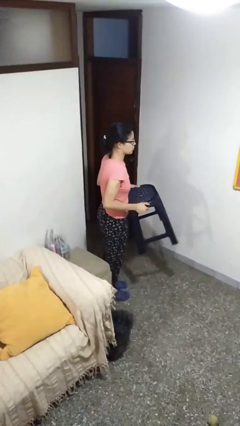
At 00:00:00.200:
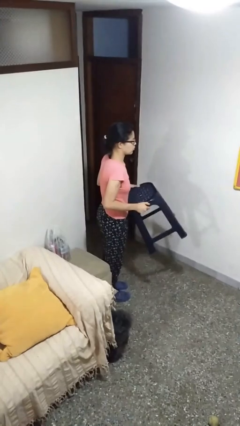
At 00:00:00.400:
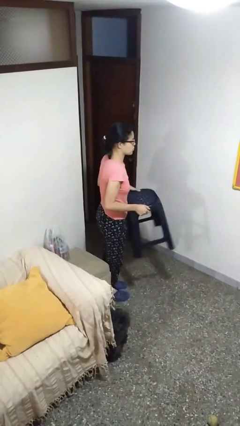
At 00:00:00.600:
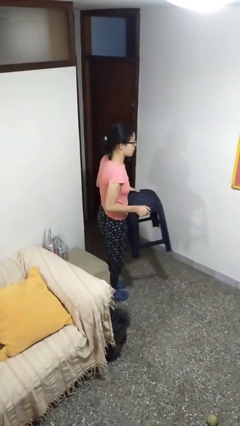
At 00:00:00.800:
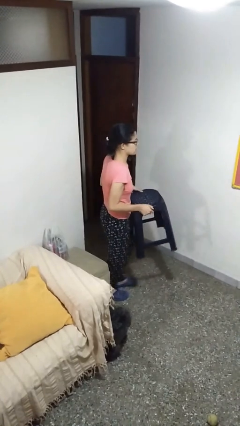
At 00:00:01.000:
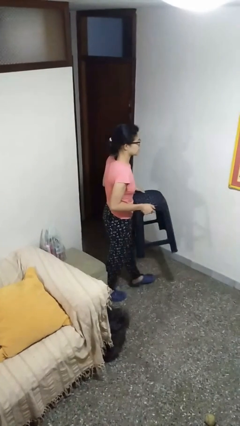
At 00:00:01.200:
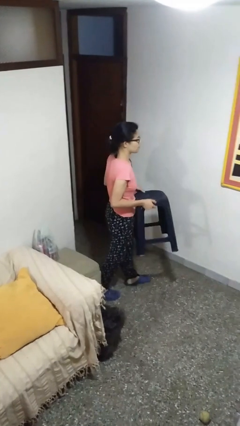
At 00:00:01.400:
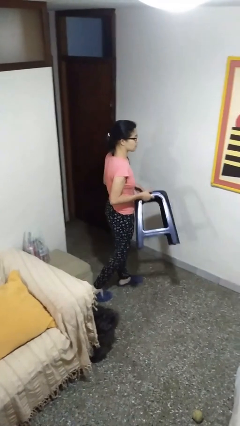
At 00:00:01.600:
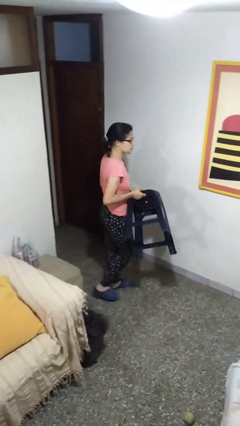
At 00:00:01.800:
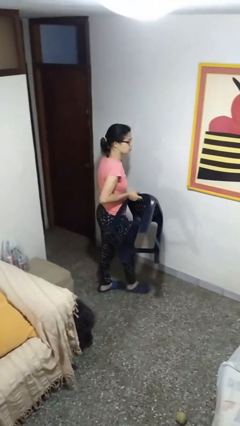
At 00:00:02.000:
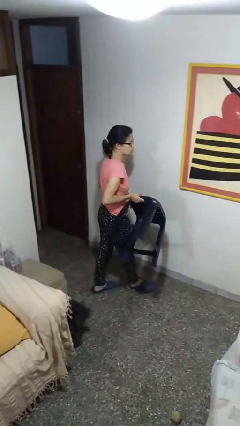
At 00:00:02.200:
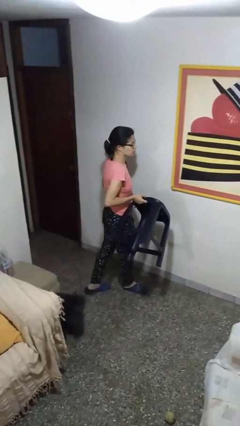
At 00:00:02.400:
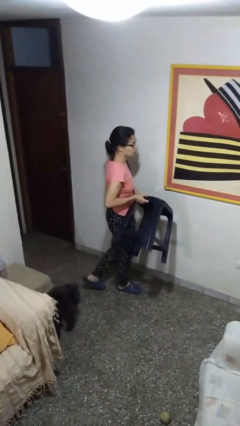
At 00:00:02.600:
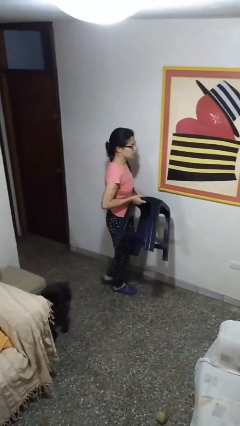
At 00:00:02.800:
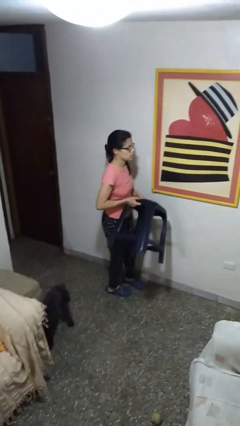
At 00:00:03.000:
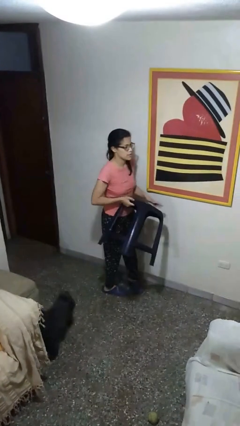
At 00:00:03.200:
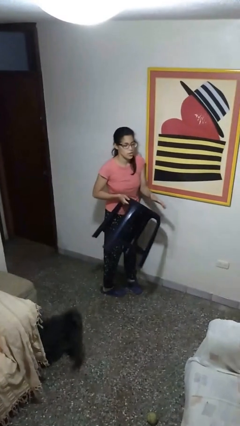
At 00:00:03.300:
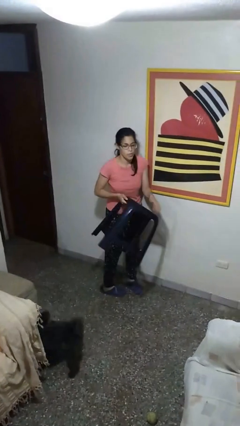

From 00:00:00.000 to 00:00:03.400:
person carries furniture

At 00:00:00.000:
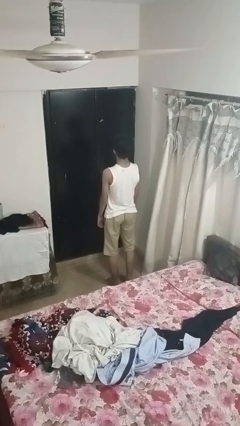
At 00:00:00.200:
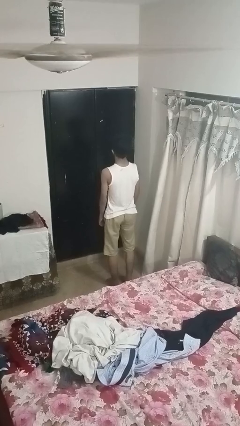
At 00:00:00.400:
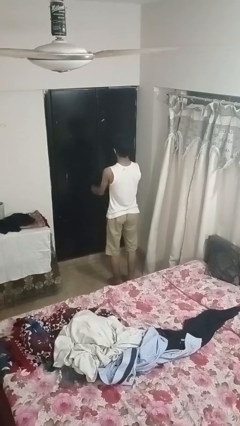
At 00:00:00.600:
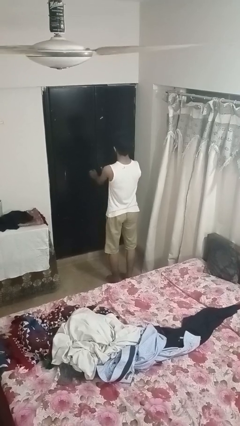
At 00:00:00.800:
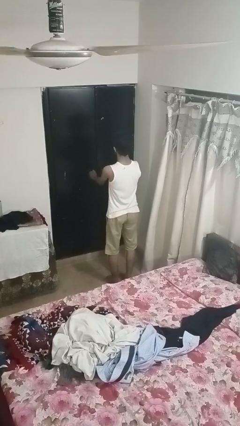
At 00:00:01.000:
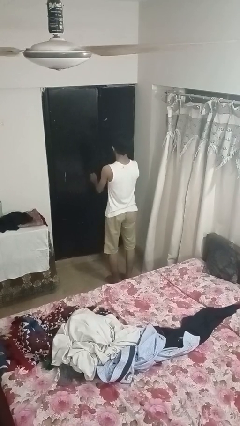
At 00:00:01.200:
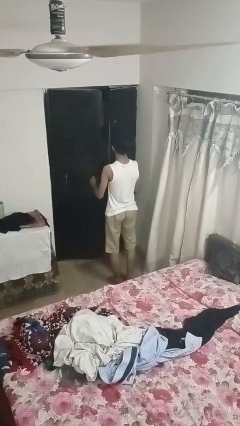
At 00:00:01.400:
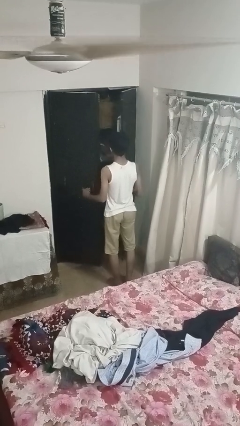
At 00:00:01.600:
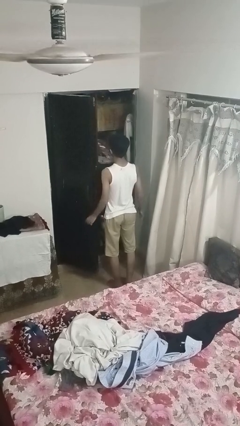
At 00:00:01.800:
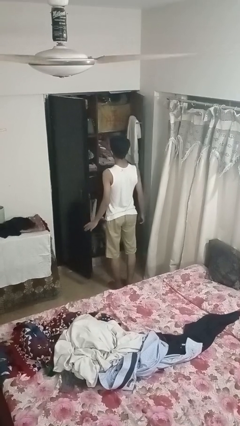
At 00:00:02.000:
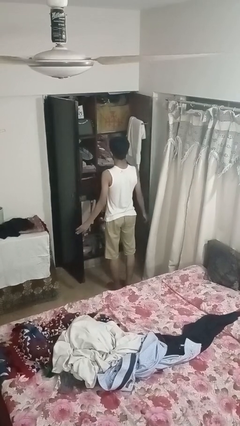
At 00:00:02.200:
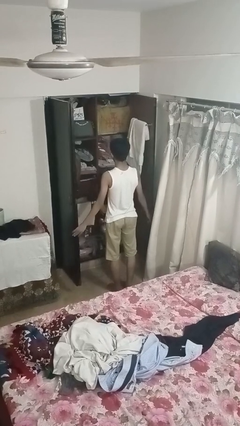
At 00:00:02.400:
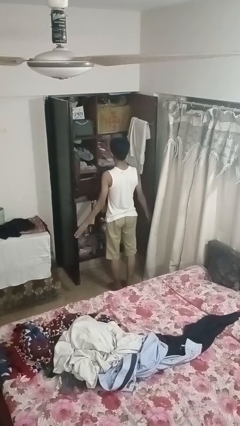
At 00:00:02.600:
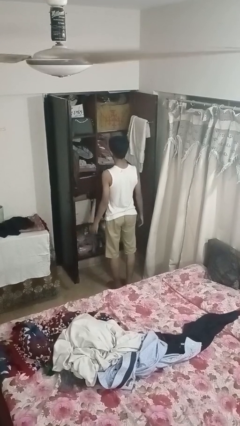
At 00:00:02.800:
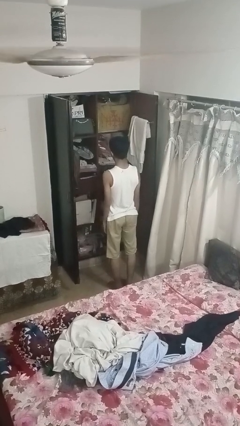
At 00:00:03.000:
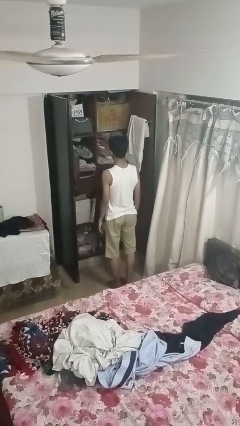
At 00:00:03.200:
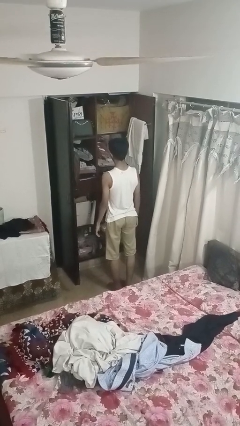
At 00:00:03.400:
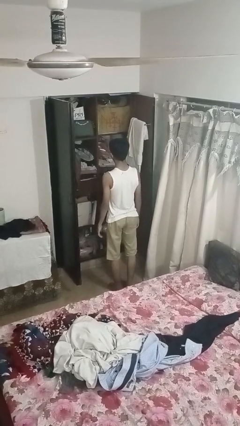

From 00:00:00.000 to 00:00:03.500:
person opens closet door

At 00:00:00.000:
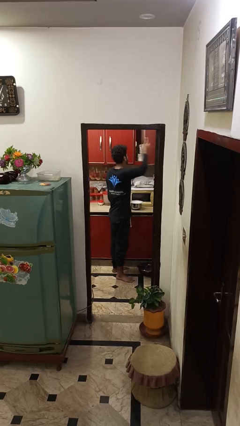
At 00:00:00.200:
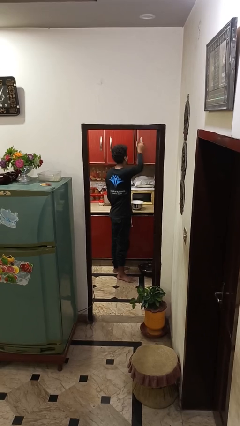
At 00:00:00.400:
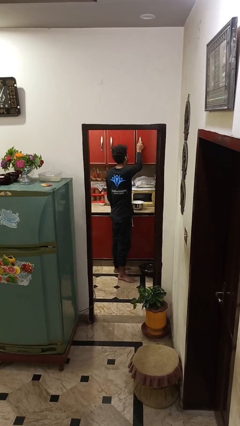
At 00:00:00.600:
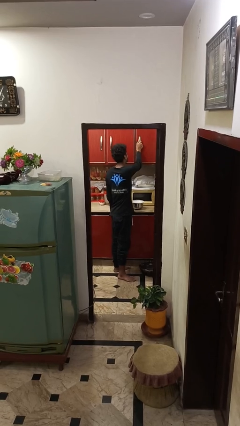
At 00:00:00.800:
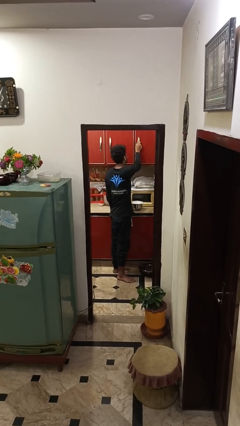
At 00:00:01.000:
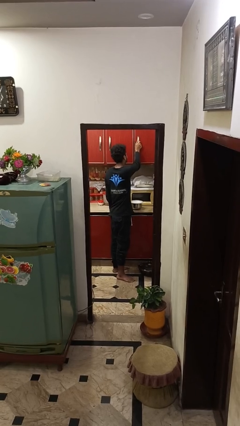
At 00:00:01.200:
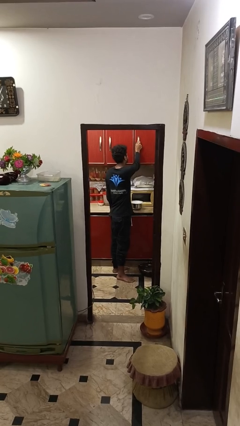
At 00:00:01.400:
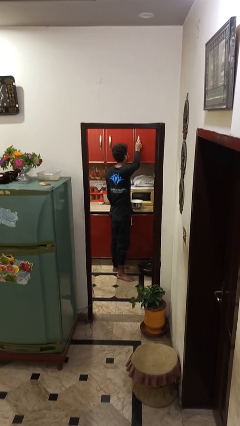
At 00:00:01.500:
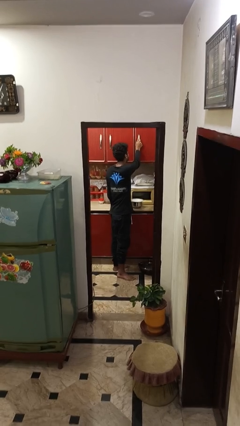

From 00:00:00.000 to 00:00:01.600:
person closes cabinet

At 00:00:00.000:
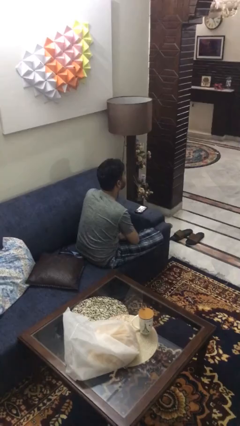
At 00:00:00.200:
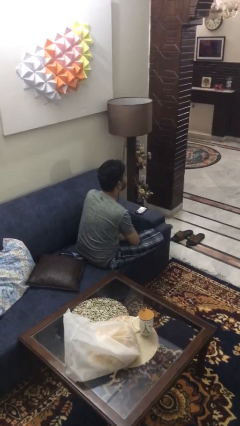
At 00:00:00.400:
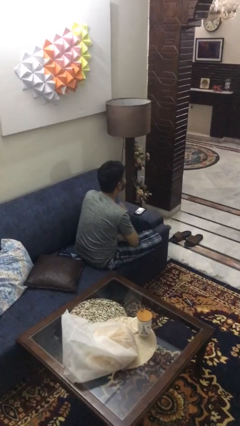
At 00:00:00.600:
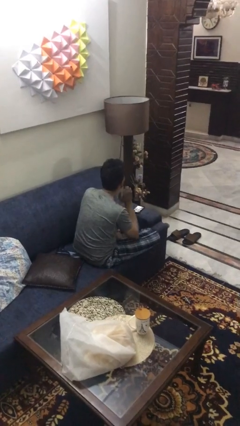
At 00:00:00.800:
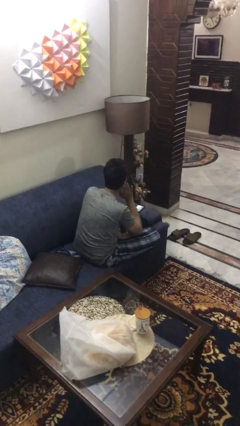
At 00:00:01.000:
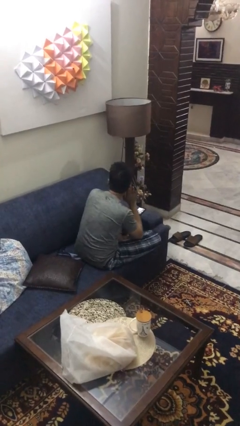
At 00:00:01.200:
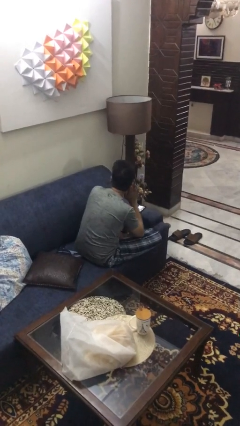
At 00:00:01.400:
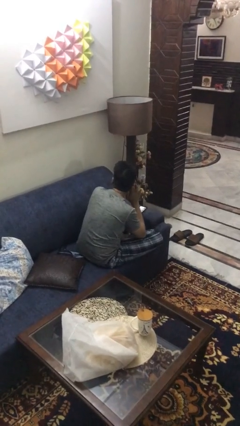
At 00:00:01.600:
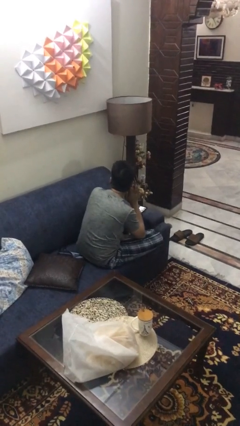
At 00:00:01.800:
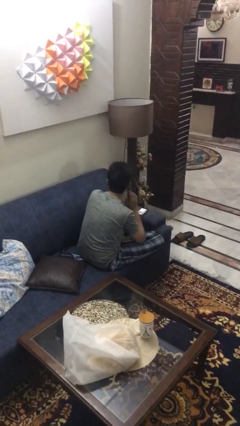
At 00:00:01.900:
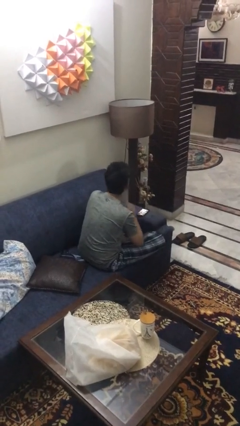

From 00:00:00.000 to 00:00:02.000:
person gestures listen closely

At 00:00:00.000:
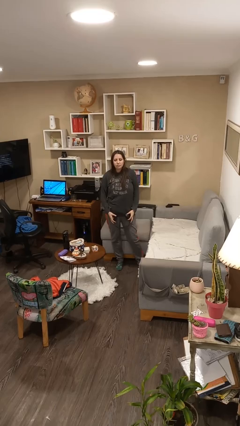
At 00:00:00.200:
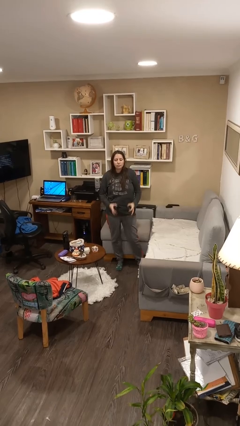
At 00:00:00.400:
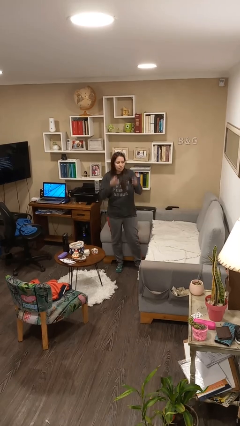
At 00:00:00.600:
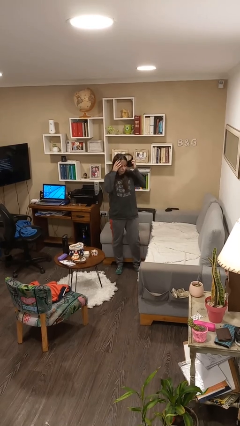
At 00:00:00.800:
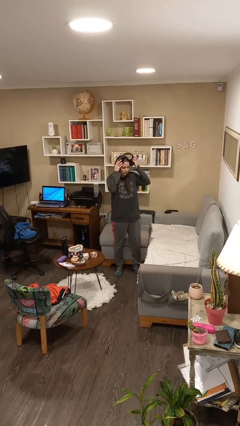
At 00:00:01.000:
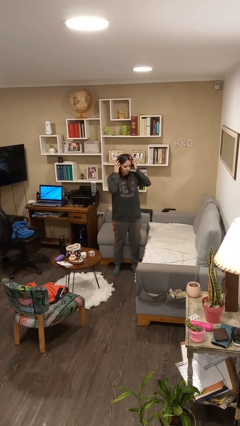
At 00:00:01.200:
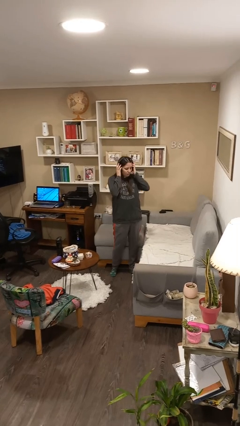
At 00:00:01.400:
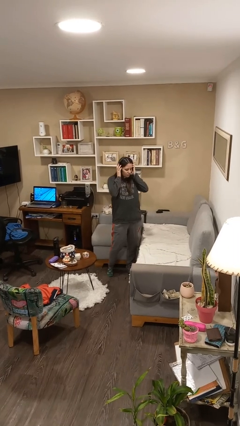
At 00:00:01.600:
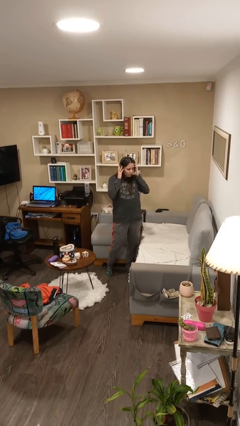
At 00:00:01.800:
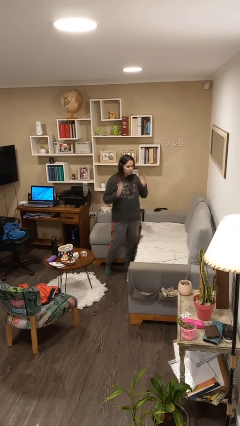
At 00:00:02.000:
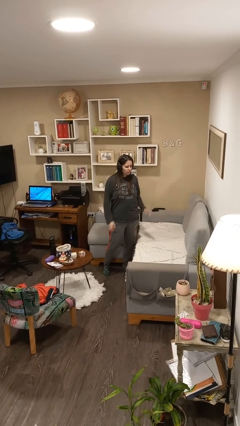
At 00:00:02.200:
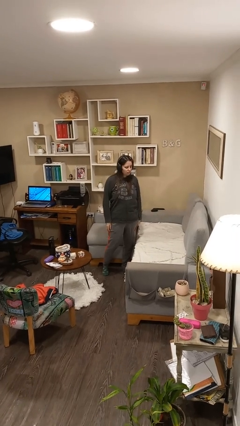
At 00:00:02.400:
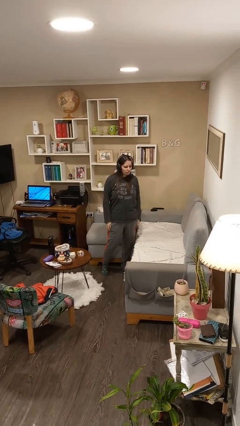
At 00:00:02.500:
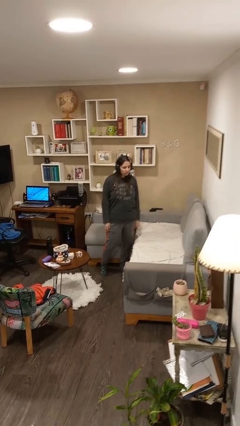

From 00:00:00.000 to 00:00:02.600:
person puts on headphones

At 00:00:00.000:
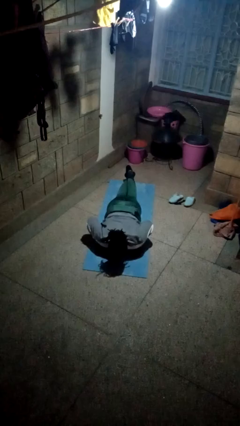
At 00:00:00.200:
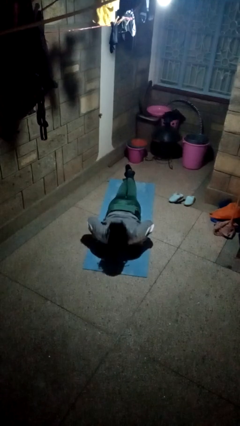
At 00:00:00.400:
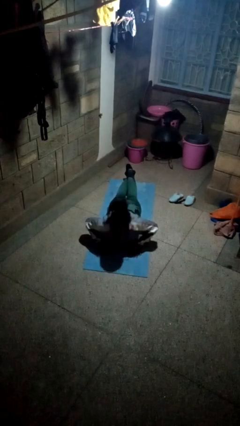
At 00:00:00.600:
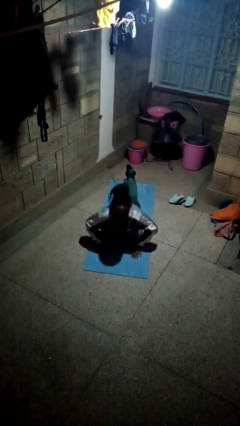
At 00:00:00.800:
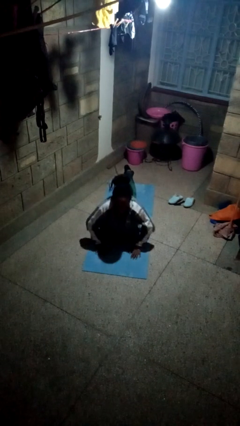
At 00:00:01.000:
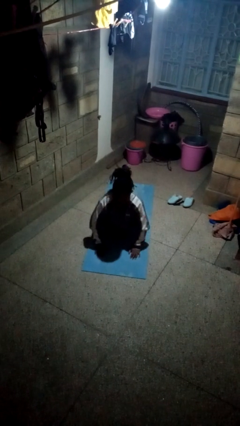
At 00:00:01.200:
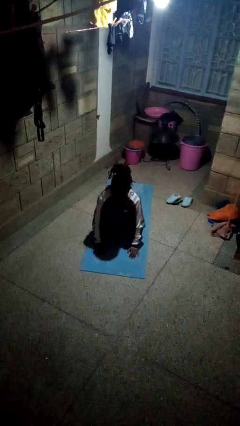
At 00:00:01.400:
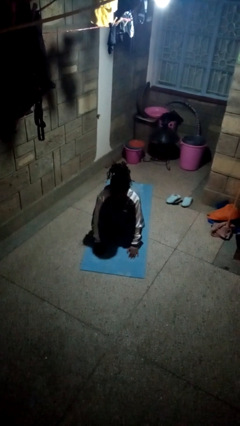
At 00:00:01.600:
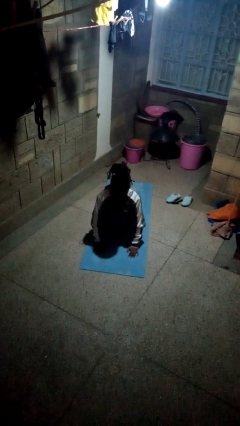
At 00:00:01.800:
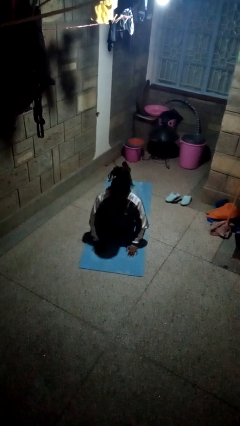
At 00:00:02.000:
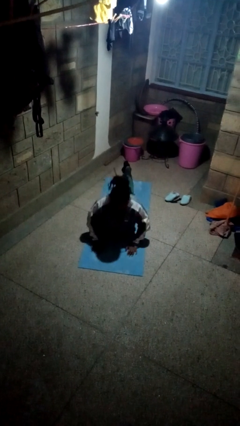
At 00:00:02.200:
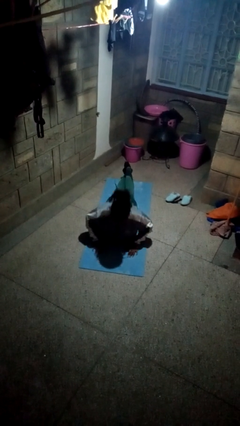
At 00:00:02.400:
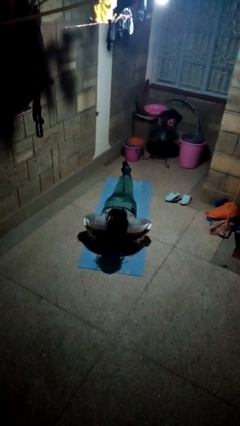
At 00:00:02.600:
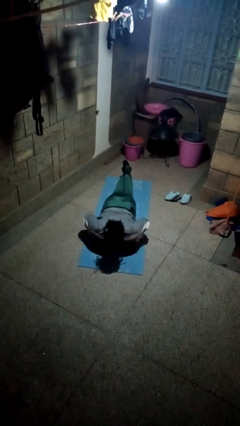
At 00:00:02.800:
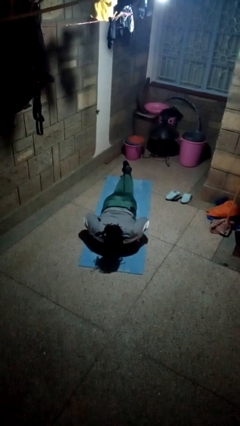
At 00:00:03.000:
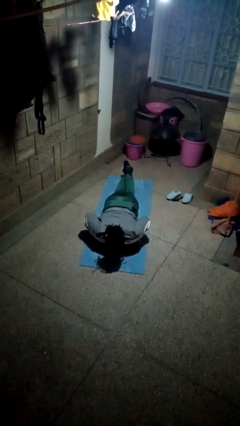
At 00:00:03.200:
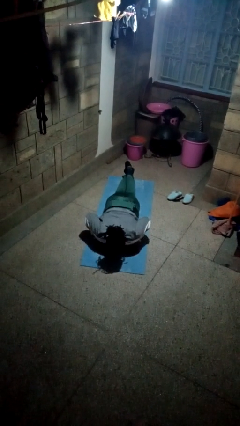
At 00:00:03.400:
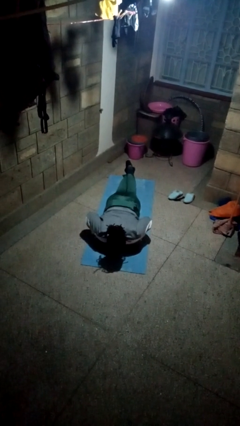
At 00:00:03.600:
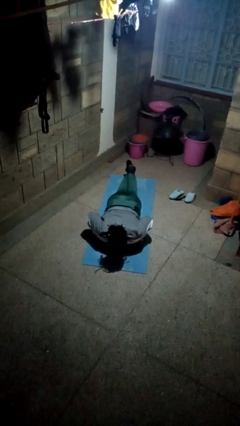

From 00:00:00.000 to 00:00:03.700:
person exercises with pushup

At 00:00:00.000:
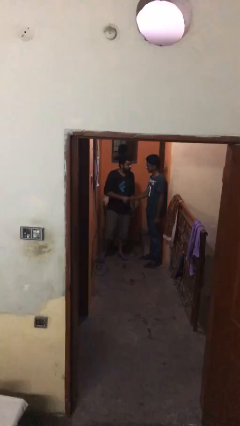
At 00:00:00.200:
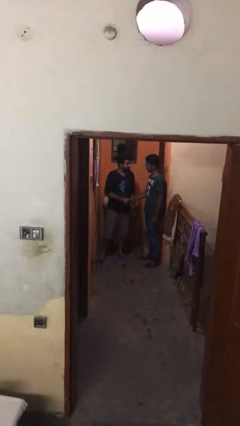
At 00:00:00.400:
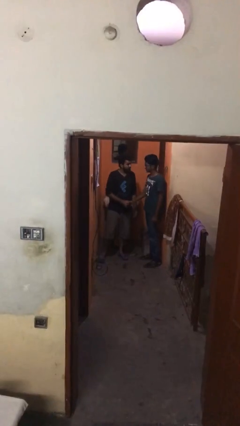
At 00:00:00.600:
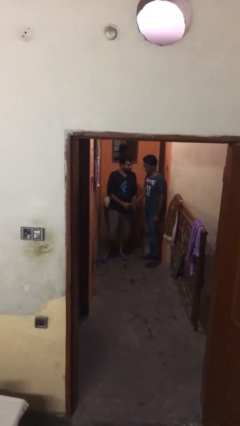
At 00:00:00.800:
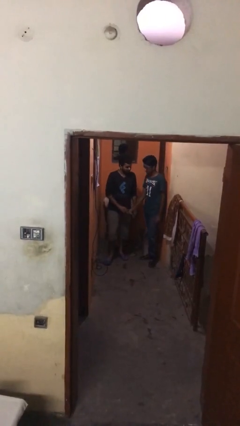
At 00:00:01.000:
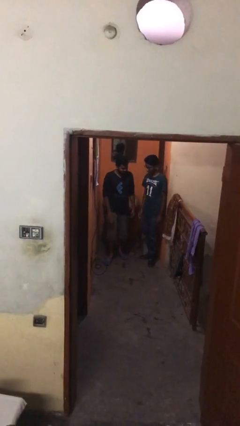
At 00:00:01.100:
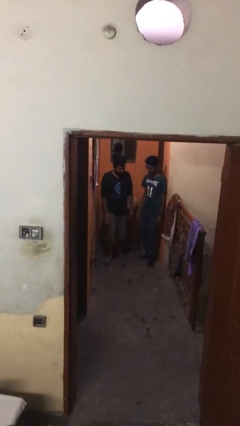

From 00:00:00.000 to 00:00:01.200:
person shakes hand